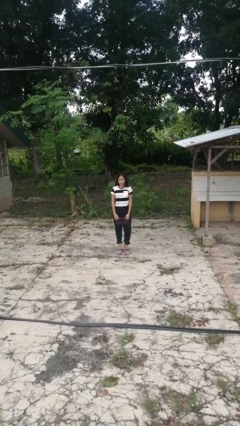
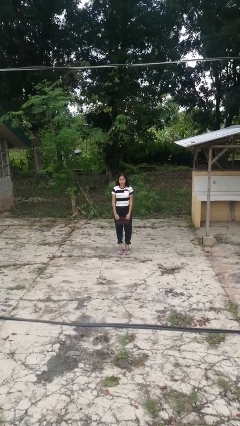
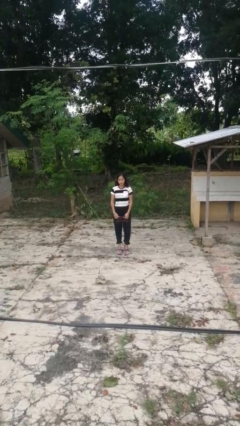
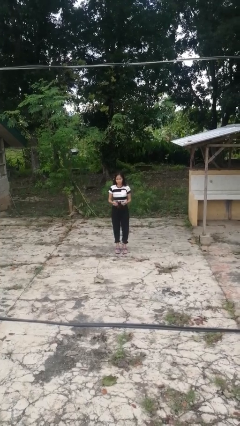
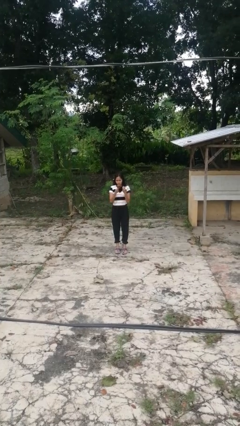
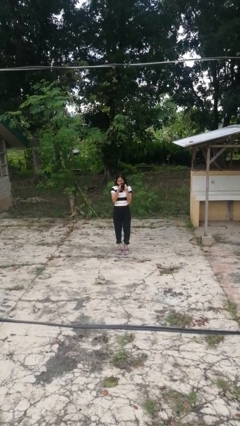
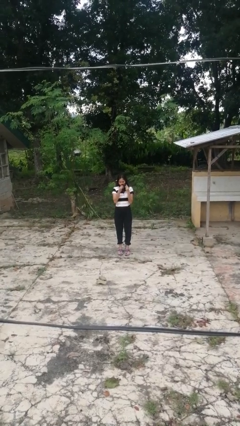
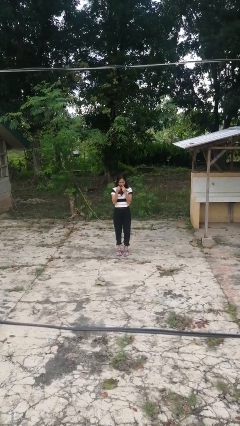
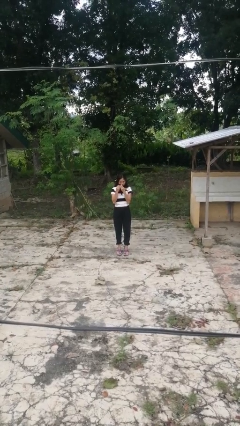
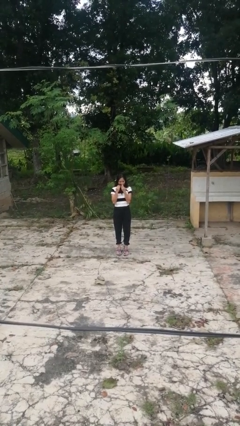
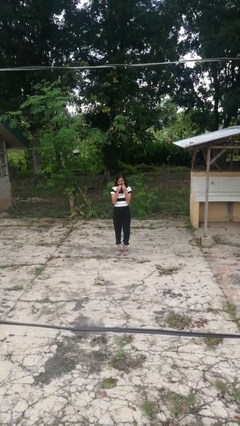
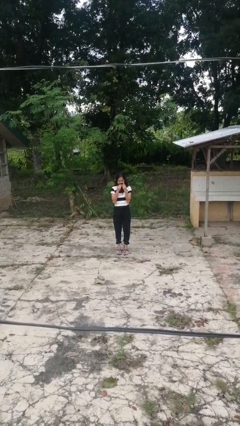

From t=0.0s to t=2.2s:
person wipes mouth with napkin

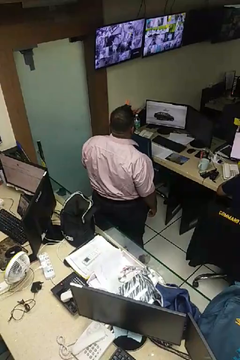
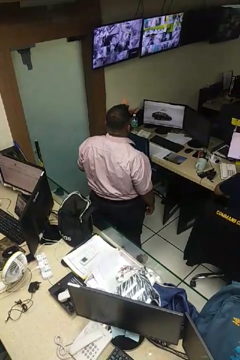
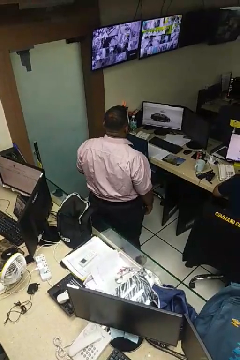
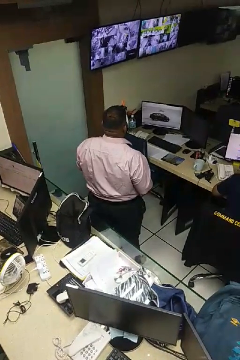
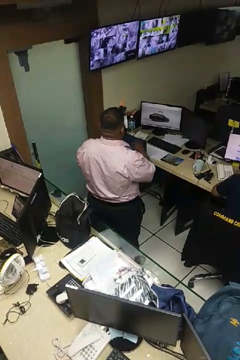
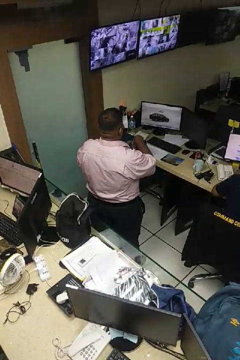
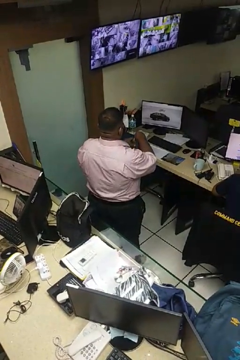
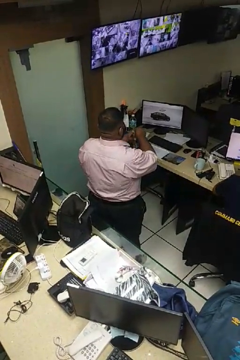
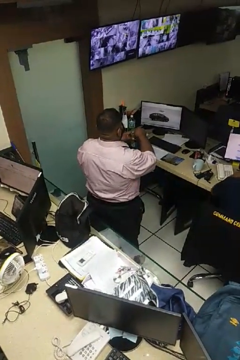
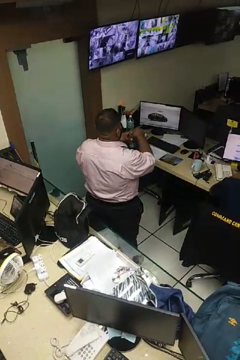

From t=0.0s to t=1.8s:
person opens beverage can

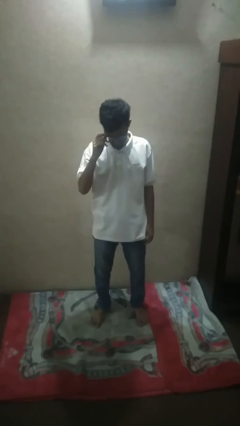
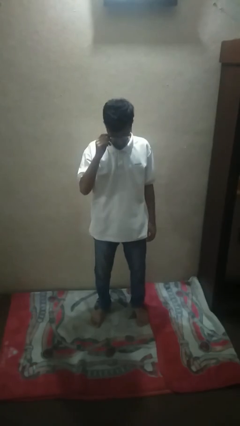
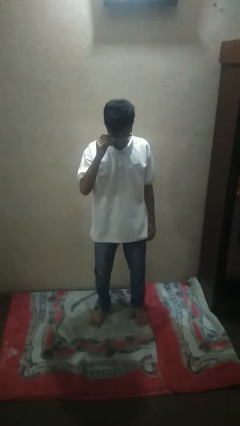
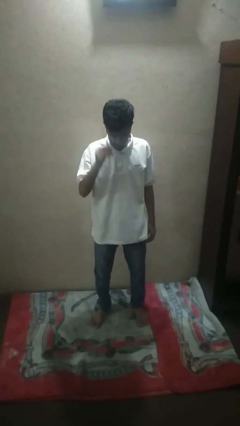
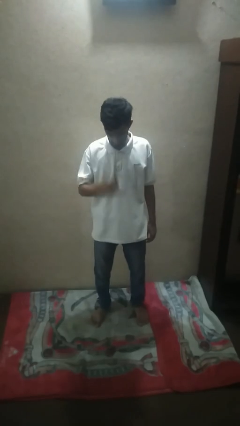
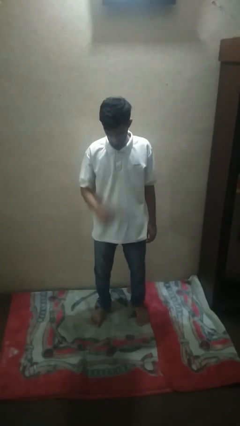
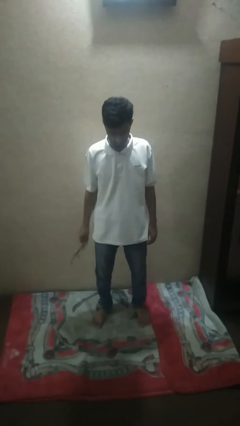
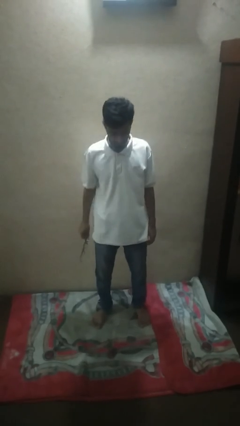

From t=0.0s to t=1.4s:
person takes off glasses

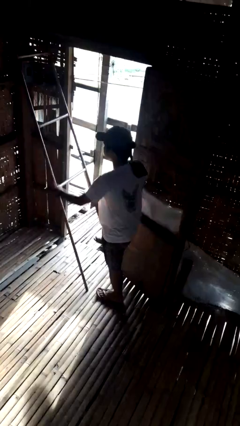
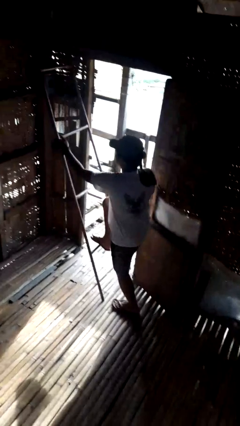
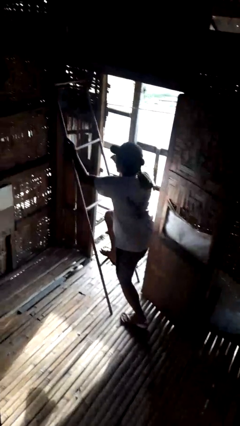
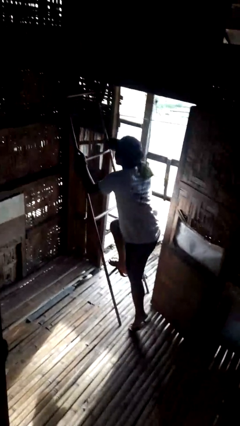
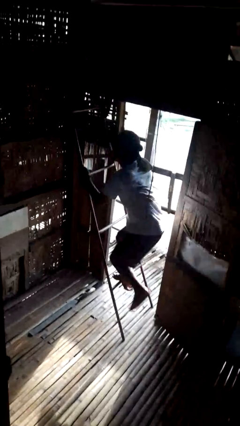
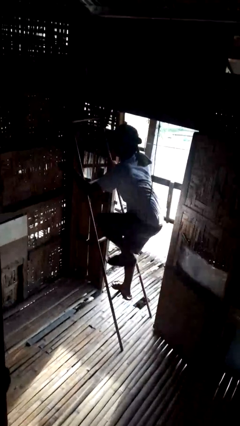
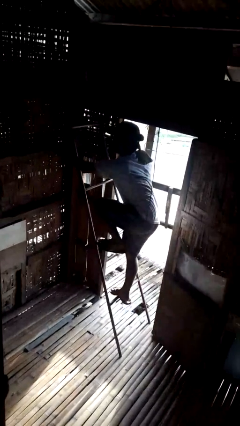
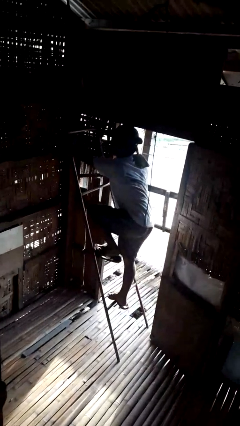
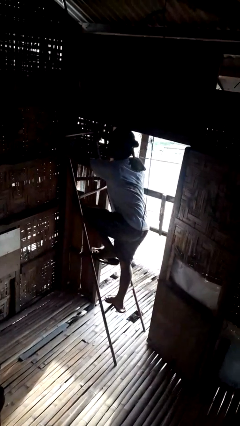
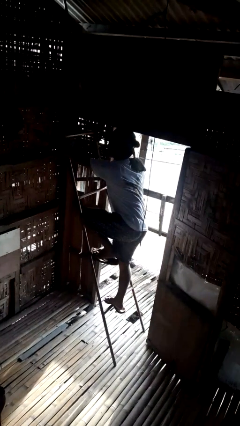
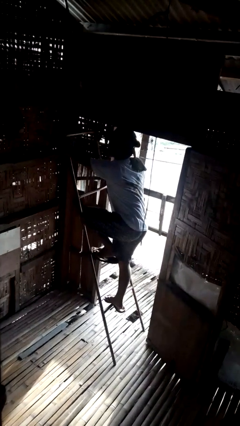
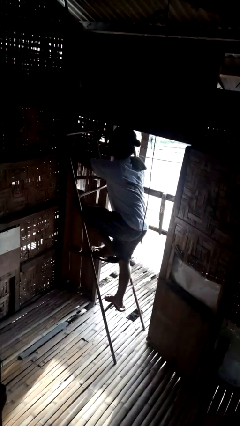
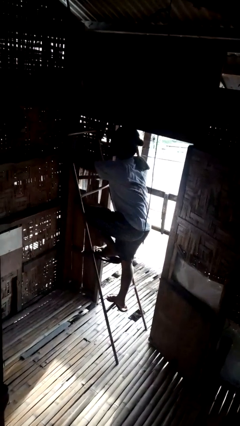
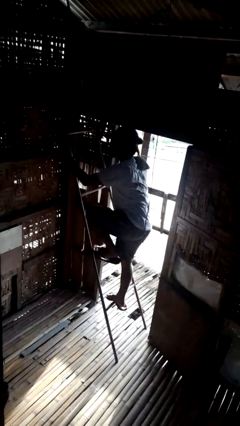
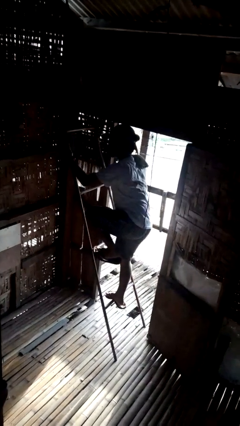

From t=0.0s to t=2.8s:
person climbs up ladder

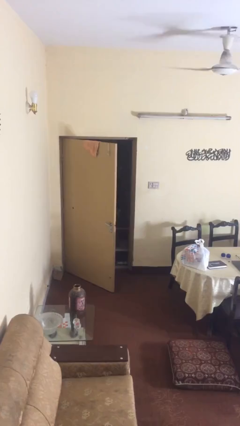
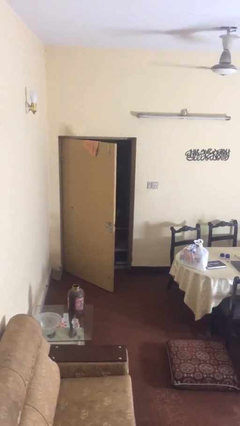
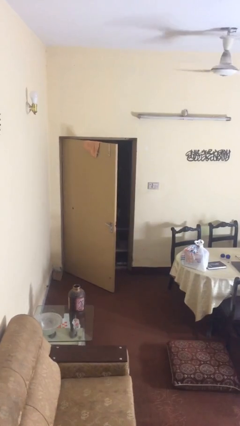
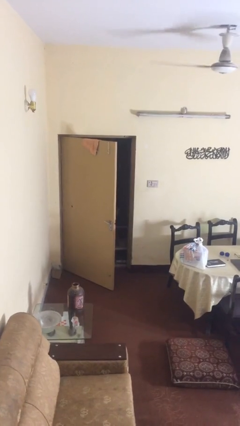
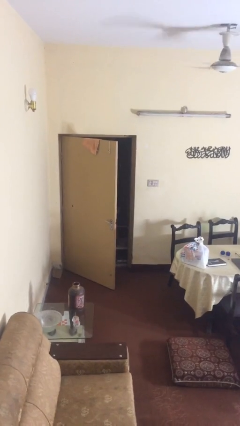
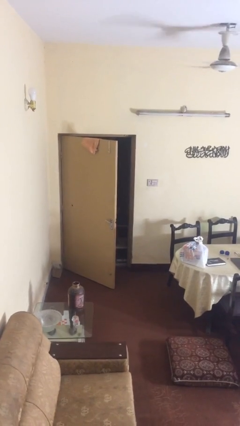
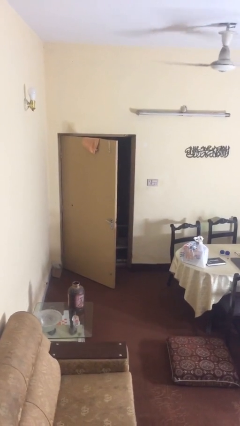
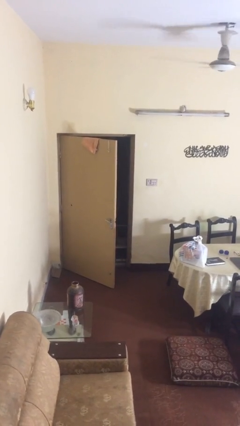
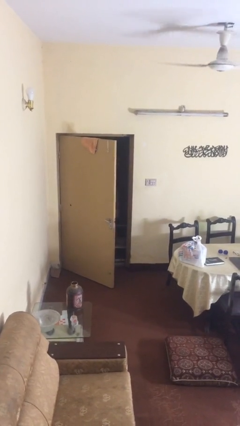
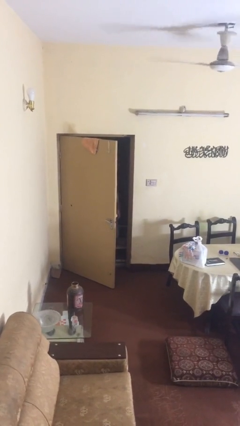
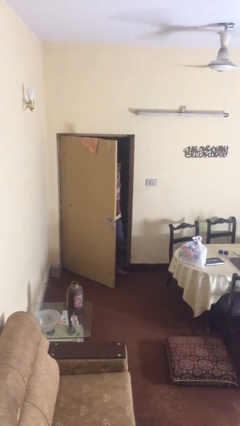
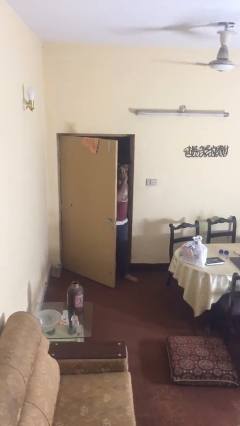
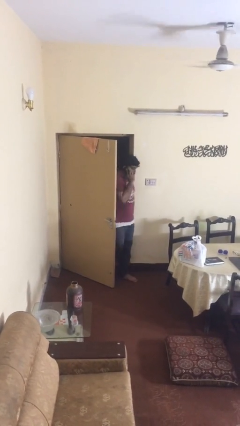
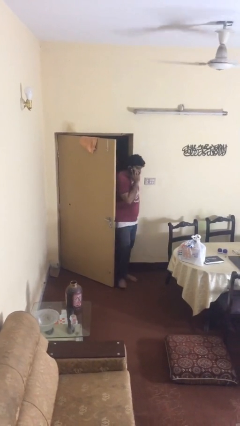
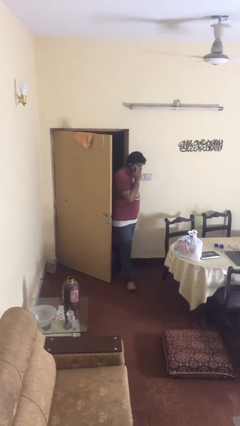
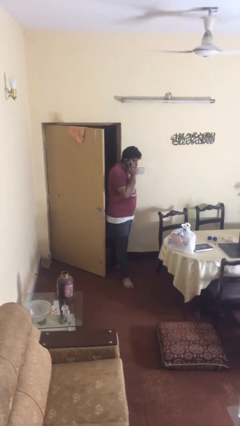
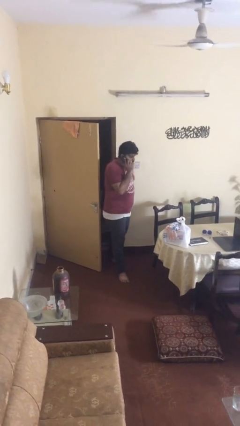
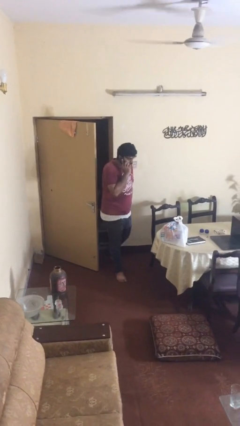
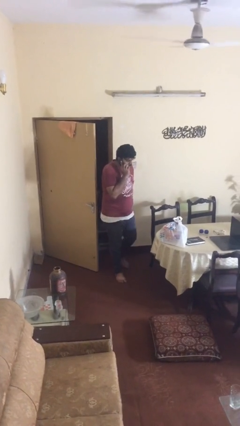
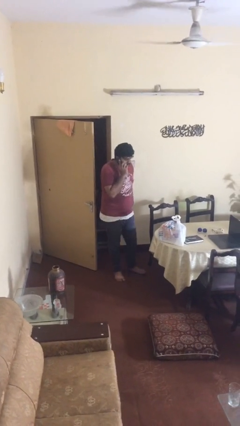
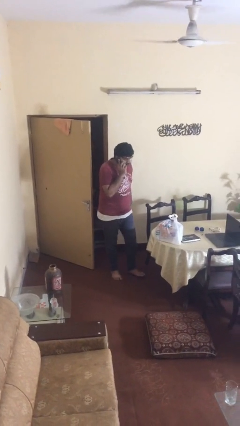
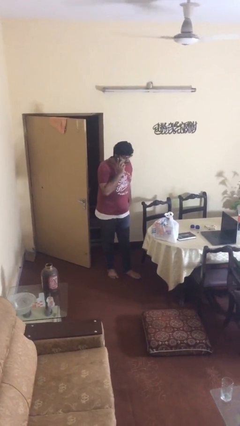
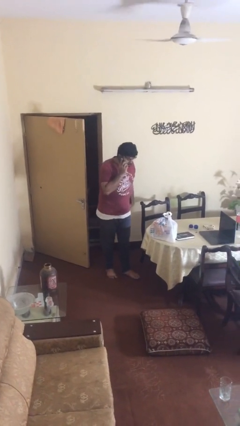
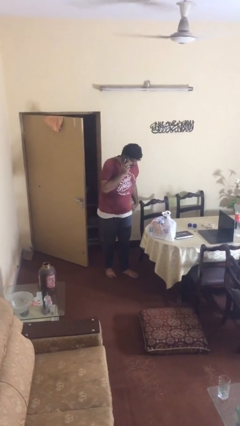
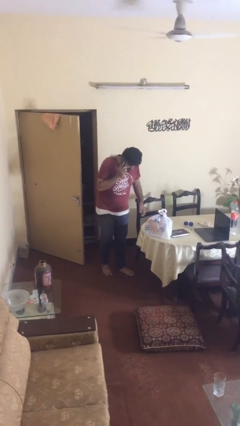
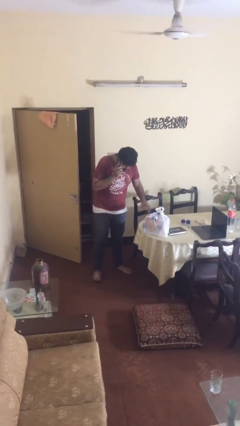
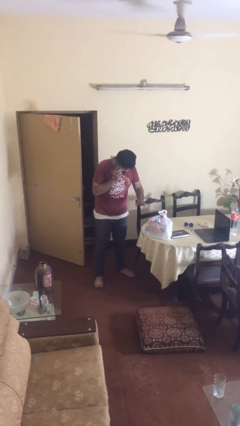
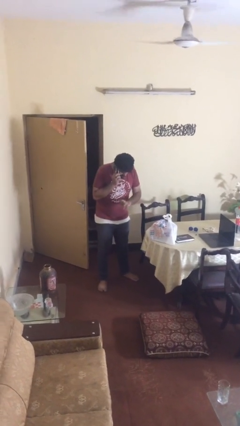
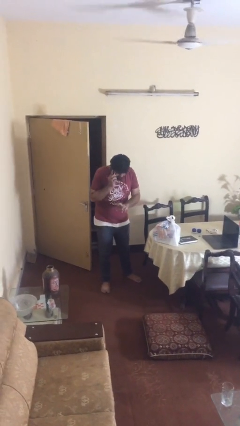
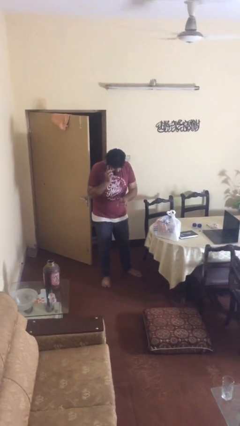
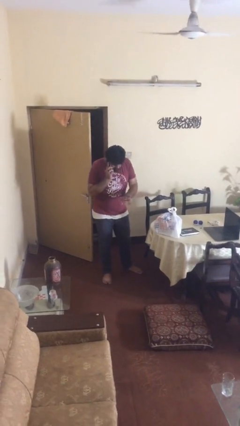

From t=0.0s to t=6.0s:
person enters scene through structure

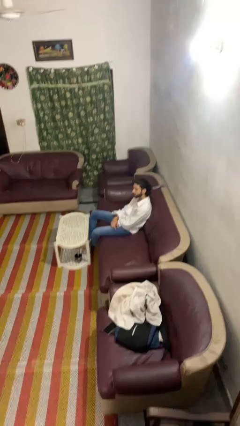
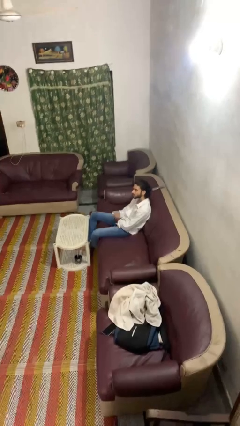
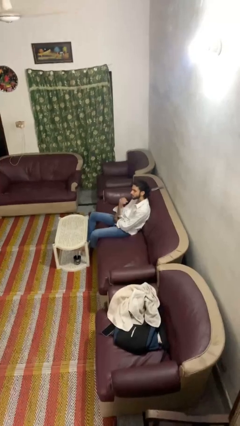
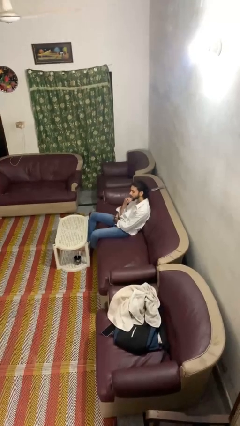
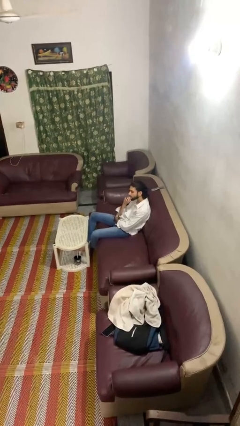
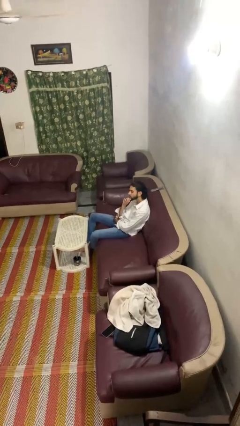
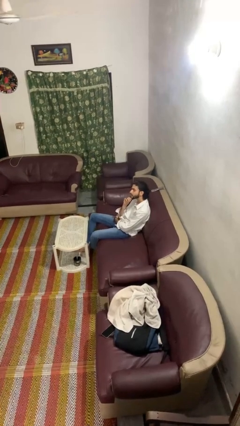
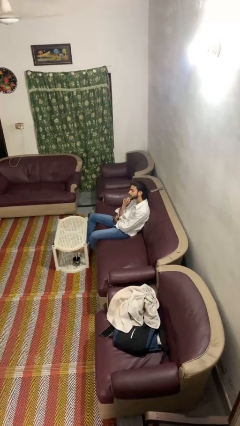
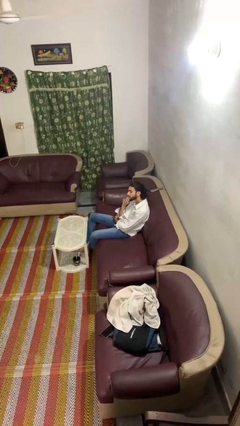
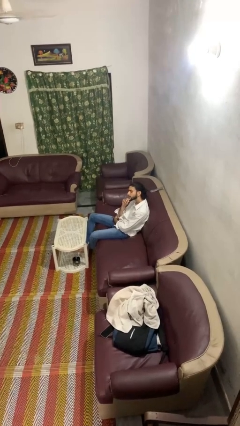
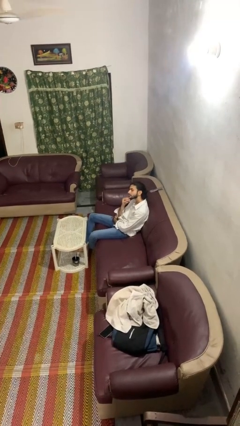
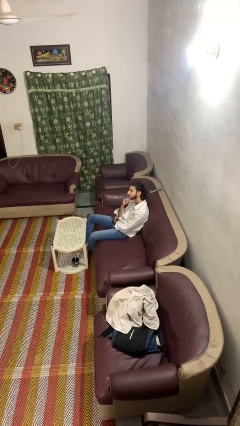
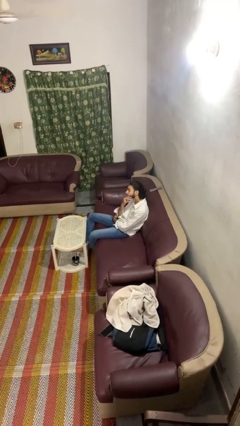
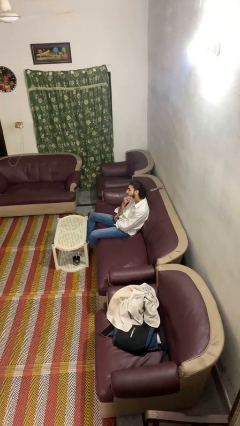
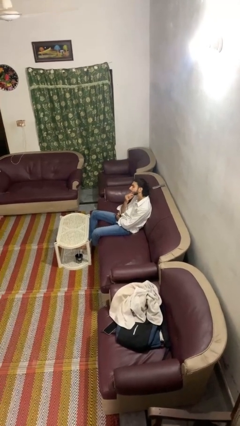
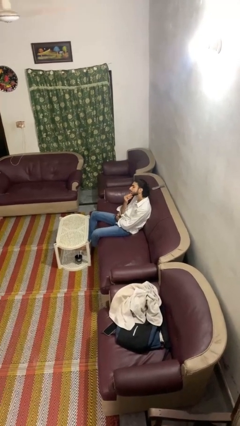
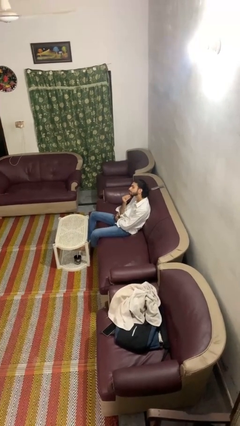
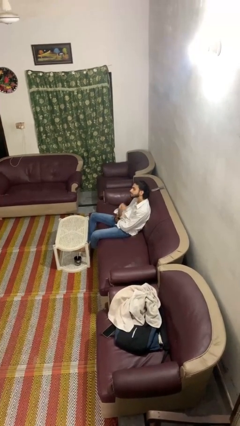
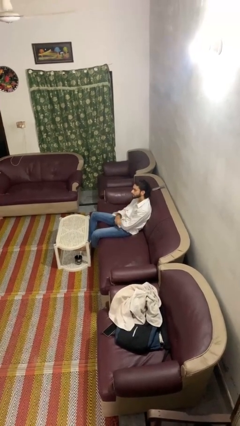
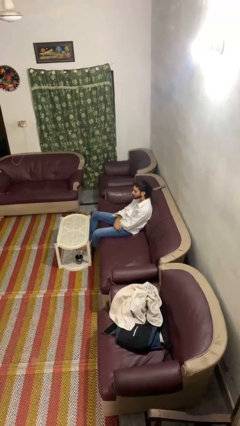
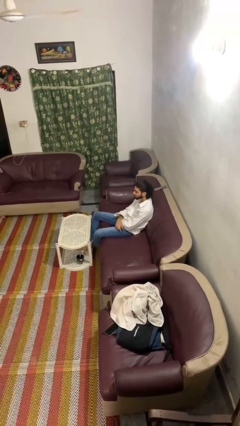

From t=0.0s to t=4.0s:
person strokes chin
